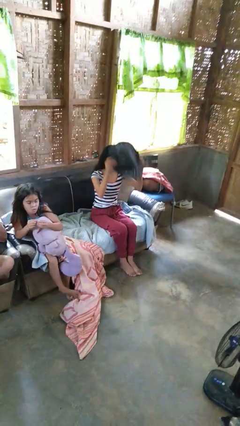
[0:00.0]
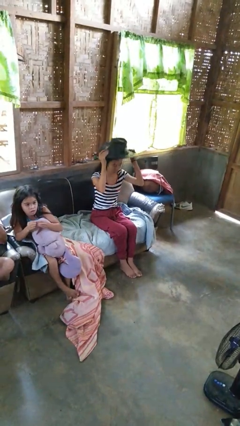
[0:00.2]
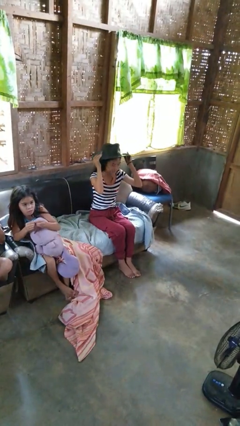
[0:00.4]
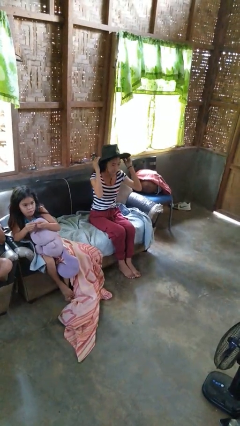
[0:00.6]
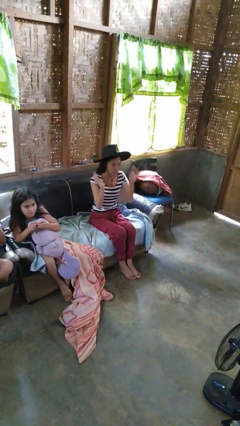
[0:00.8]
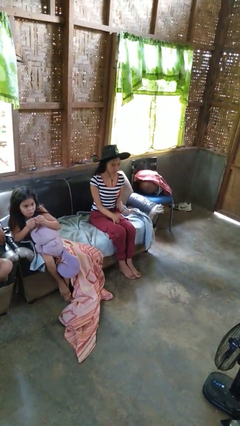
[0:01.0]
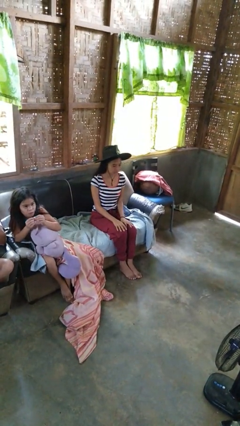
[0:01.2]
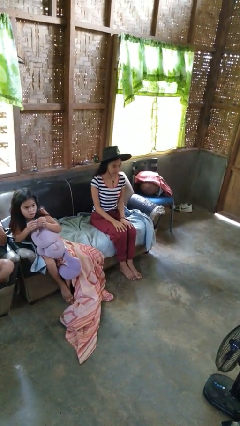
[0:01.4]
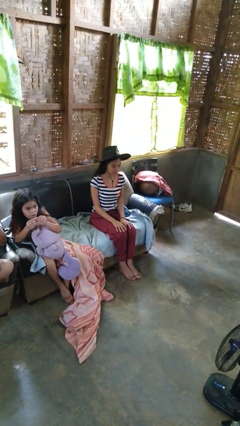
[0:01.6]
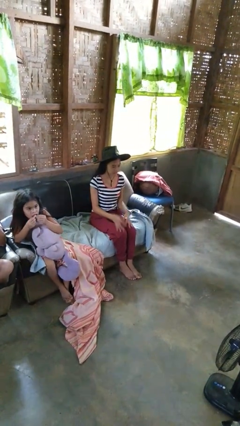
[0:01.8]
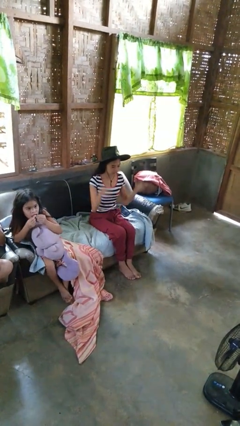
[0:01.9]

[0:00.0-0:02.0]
person puts on hat

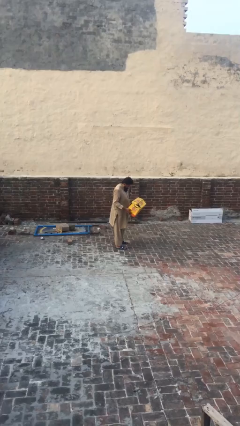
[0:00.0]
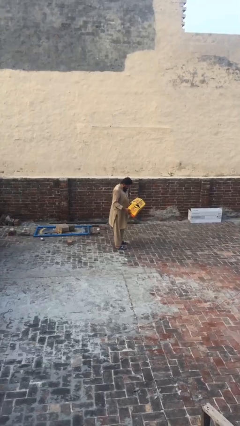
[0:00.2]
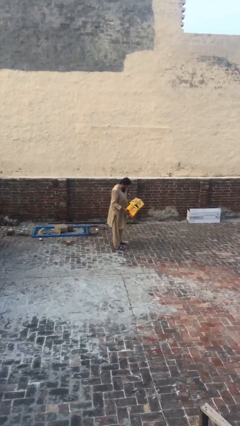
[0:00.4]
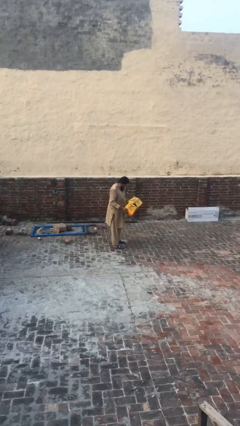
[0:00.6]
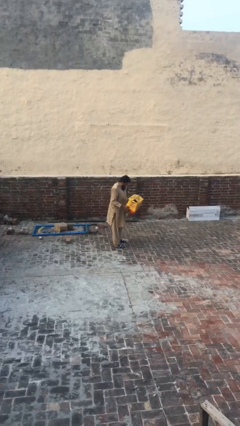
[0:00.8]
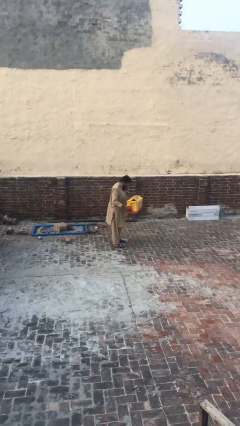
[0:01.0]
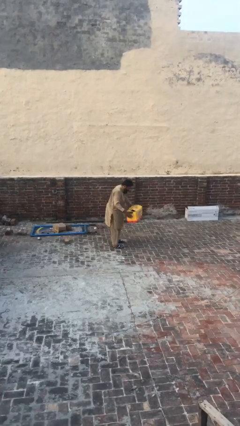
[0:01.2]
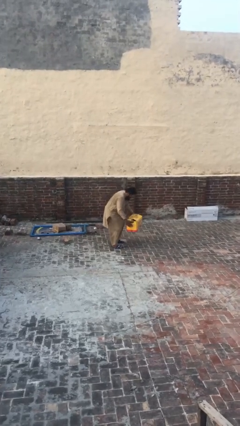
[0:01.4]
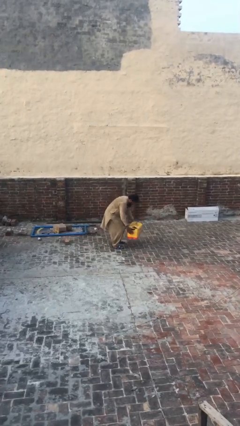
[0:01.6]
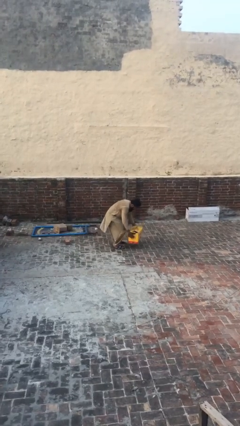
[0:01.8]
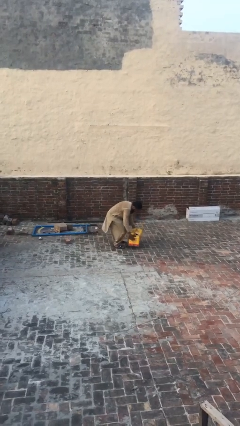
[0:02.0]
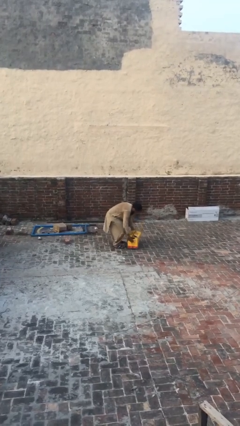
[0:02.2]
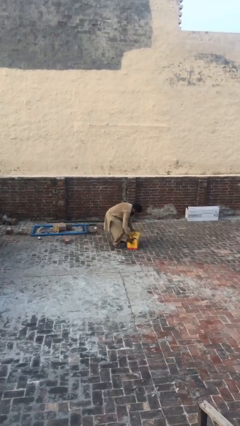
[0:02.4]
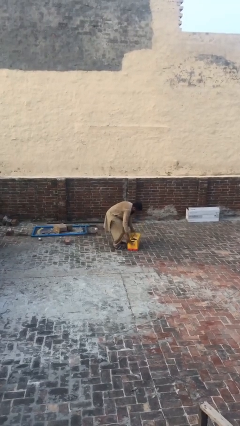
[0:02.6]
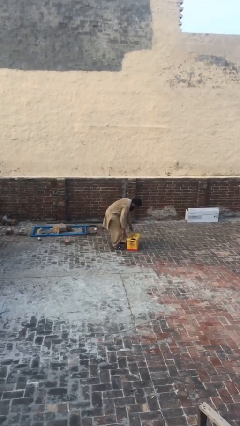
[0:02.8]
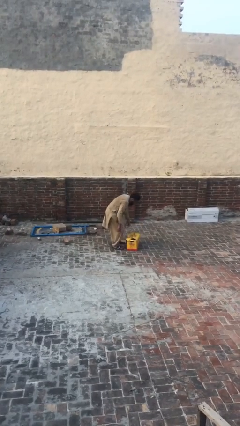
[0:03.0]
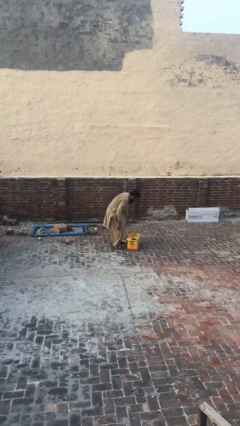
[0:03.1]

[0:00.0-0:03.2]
person puts down object on floor

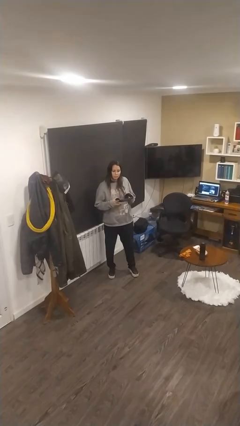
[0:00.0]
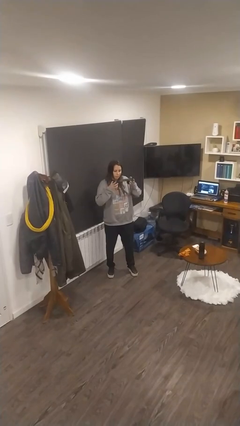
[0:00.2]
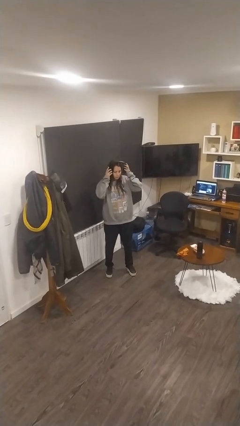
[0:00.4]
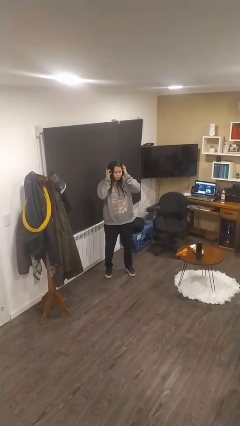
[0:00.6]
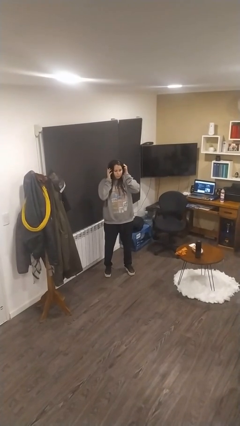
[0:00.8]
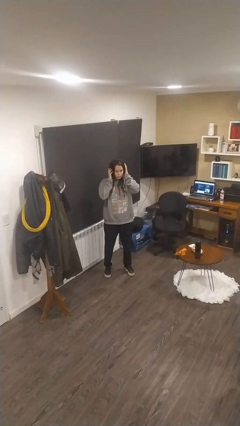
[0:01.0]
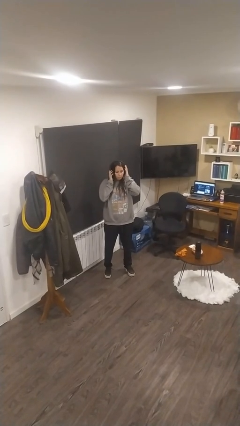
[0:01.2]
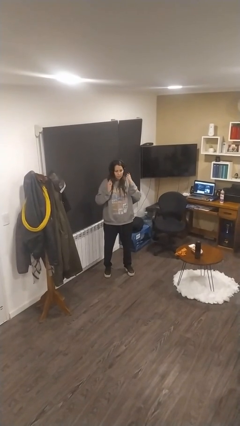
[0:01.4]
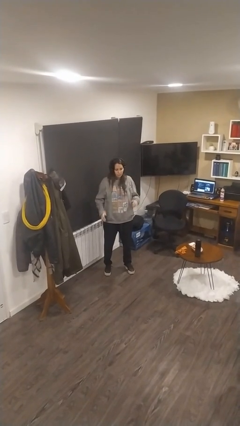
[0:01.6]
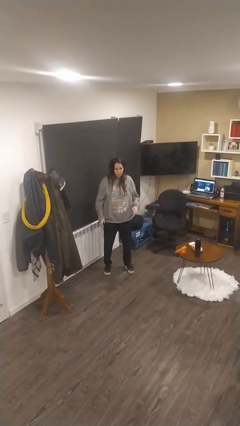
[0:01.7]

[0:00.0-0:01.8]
person puts on headphones

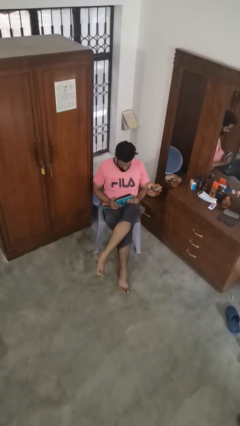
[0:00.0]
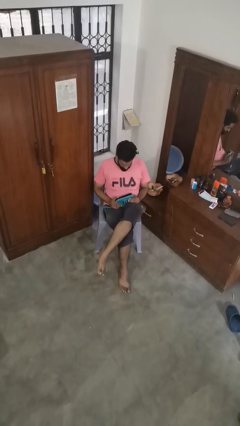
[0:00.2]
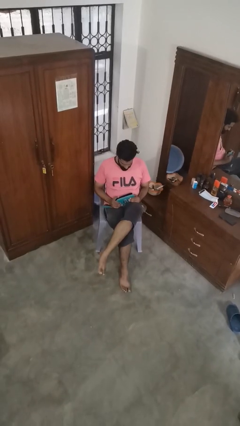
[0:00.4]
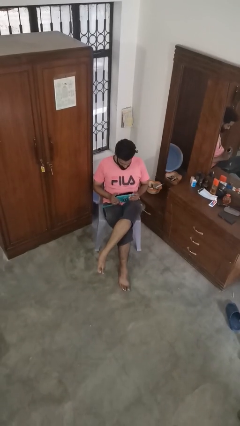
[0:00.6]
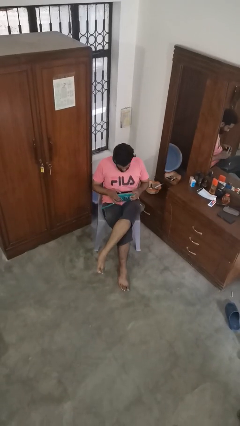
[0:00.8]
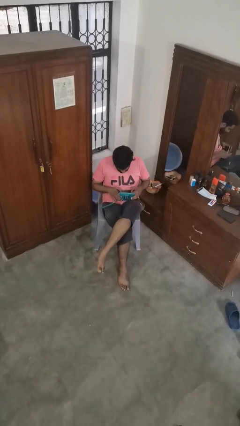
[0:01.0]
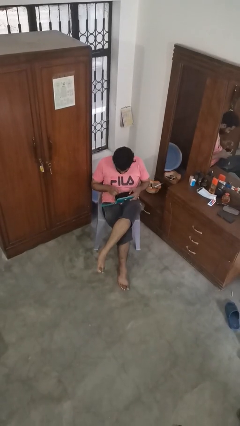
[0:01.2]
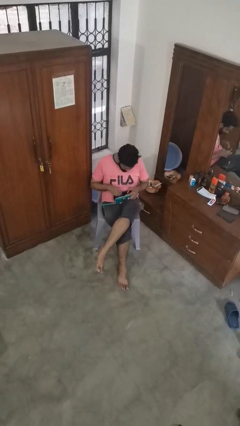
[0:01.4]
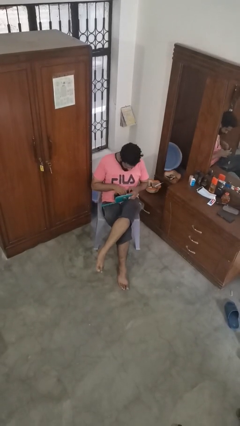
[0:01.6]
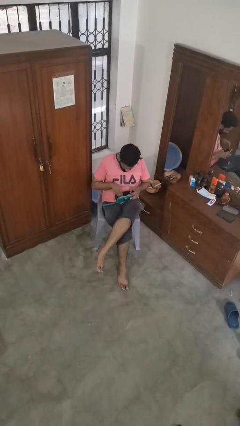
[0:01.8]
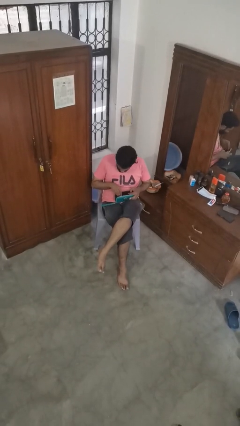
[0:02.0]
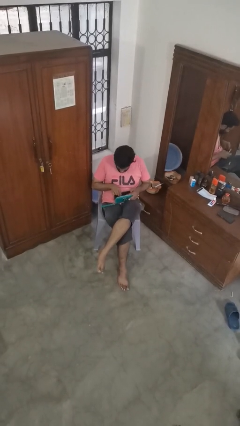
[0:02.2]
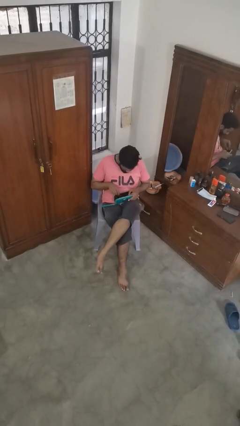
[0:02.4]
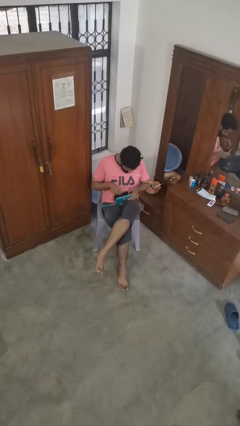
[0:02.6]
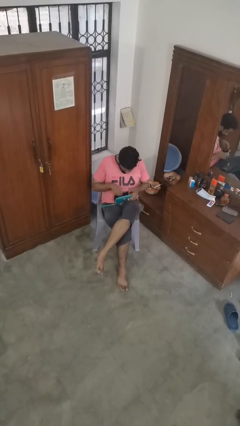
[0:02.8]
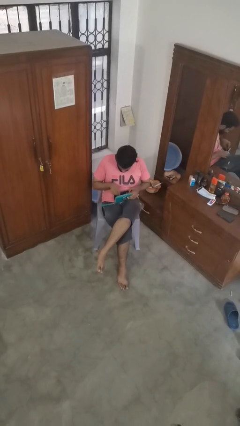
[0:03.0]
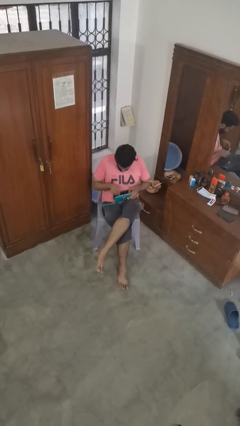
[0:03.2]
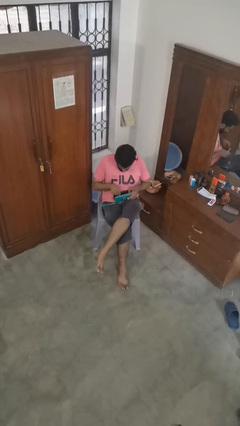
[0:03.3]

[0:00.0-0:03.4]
person searches in purse

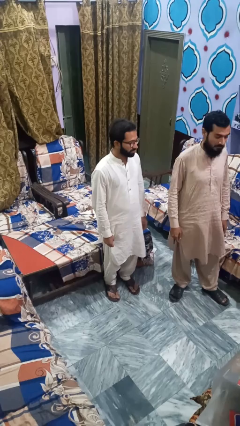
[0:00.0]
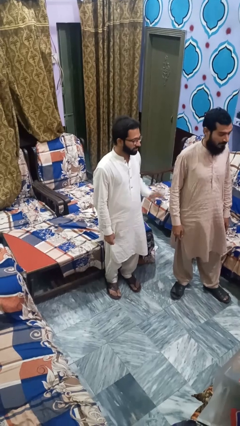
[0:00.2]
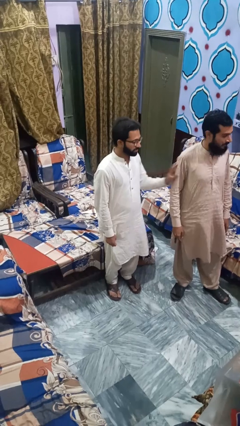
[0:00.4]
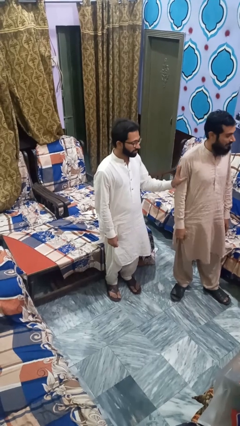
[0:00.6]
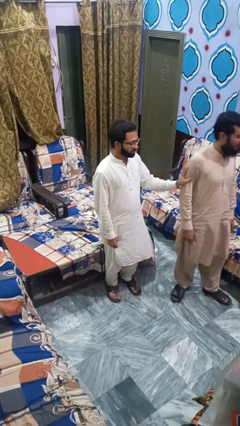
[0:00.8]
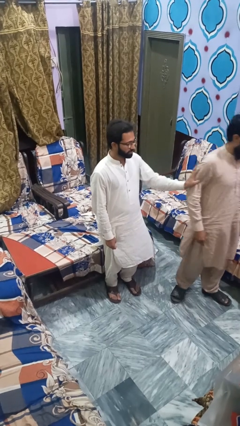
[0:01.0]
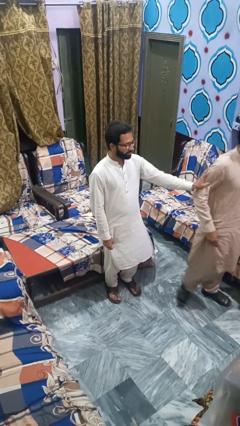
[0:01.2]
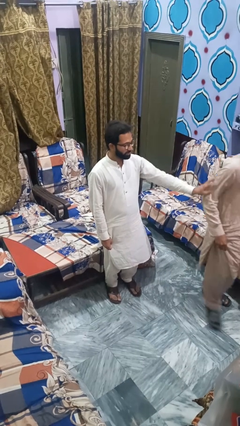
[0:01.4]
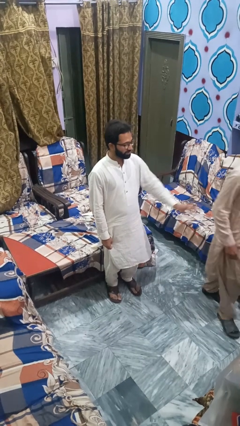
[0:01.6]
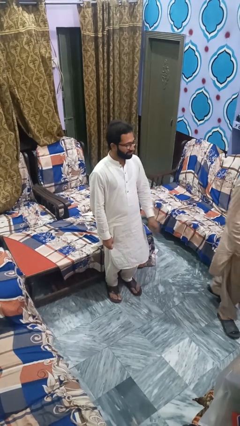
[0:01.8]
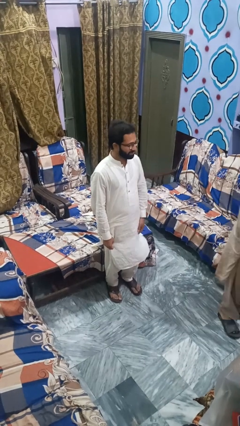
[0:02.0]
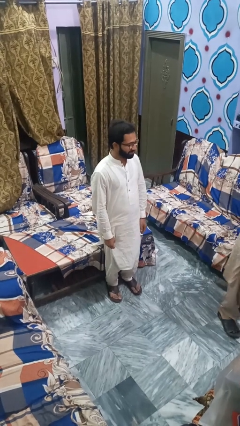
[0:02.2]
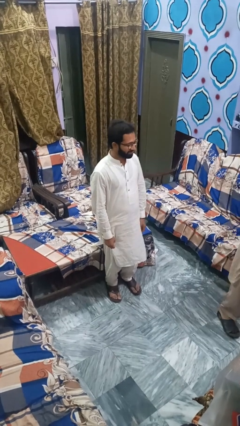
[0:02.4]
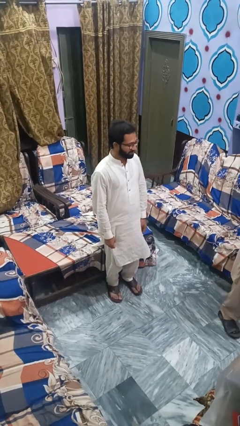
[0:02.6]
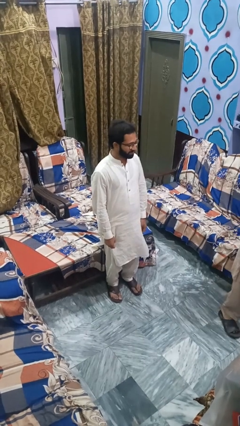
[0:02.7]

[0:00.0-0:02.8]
person shoves person

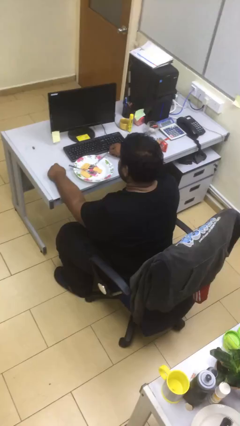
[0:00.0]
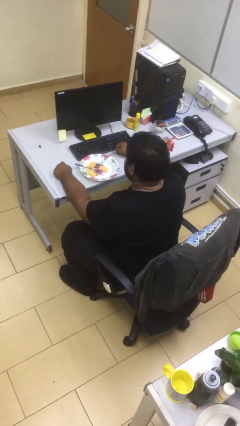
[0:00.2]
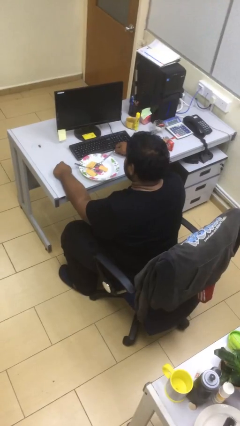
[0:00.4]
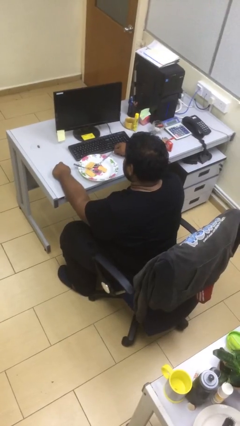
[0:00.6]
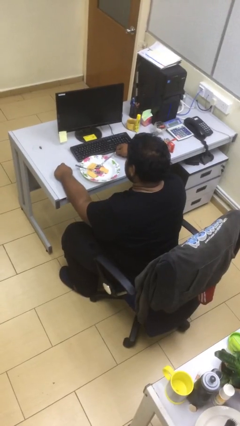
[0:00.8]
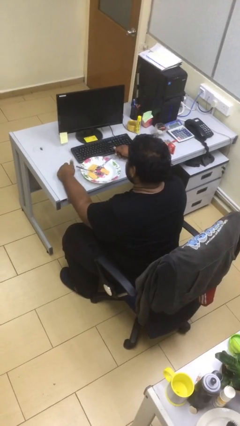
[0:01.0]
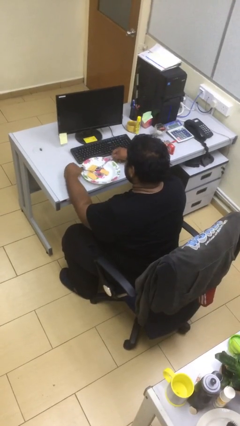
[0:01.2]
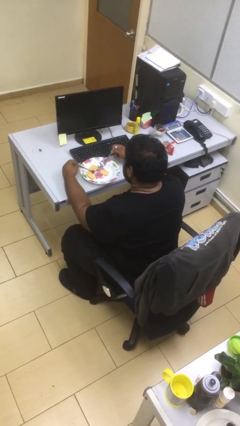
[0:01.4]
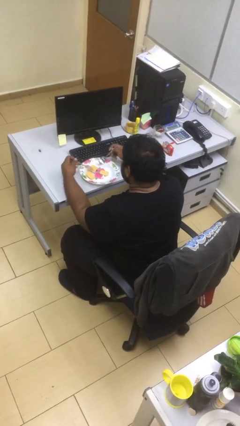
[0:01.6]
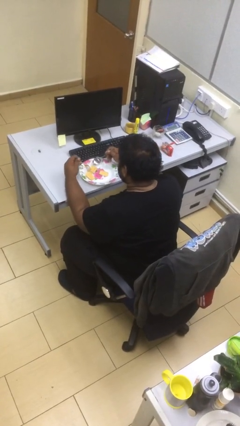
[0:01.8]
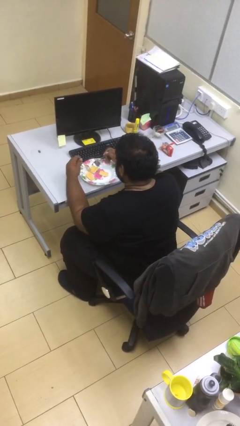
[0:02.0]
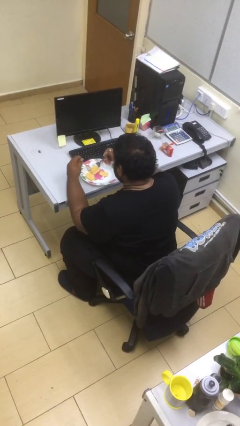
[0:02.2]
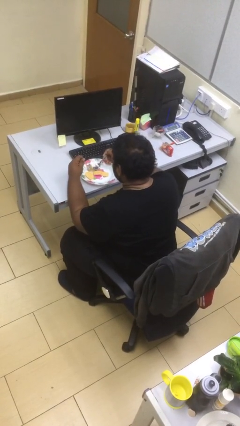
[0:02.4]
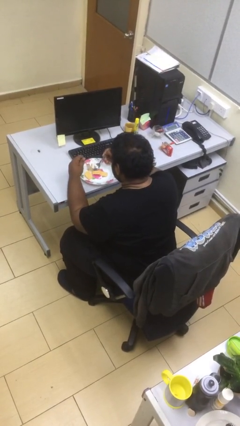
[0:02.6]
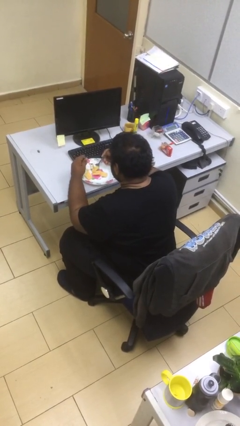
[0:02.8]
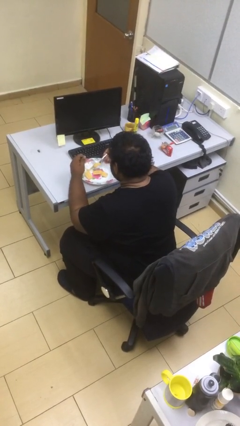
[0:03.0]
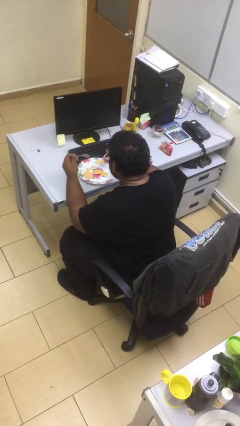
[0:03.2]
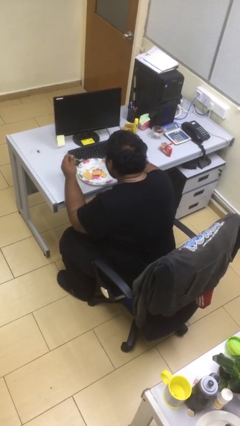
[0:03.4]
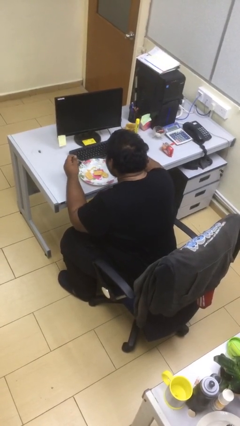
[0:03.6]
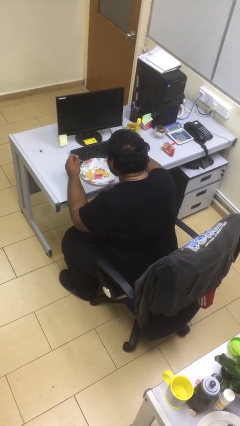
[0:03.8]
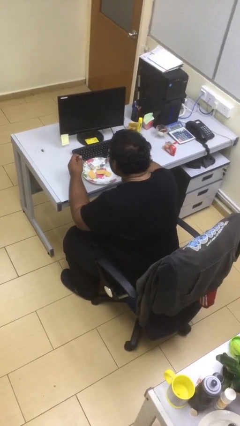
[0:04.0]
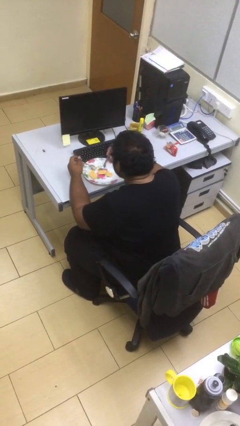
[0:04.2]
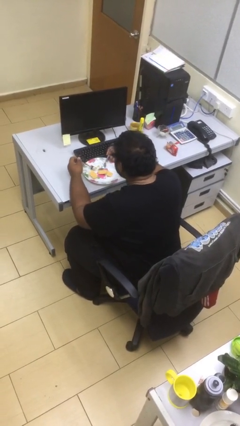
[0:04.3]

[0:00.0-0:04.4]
person eats with utensil
